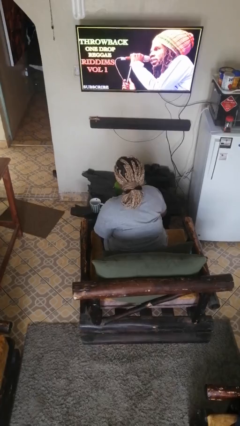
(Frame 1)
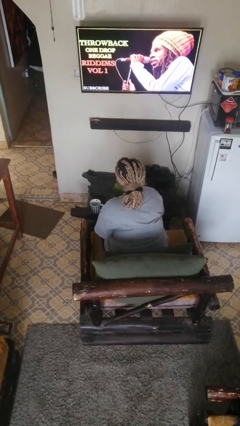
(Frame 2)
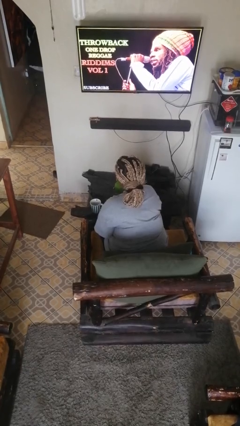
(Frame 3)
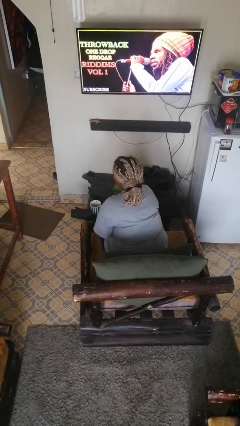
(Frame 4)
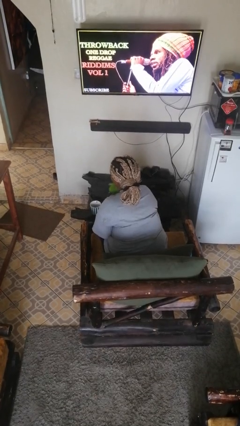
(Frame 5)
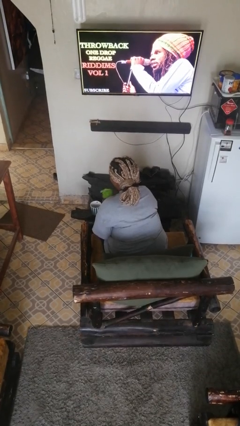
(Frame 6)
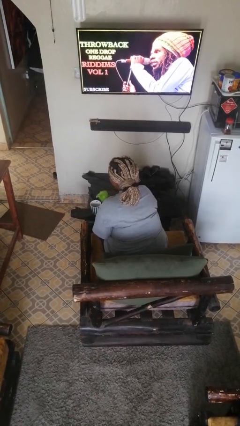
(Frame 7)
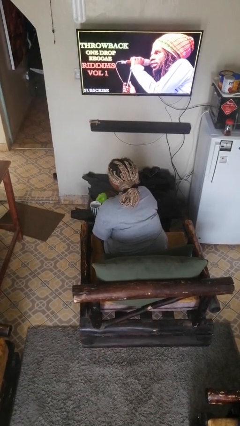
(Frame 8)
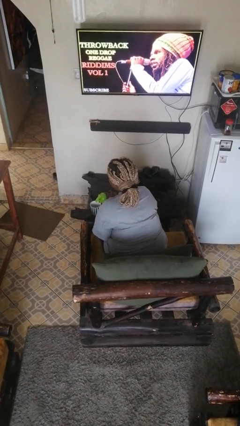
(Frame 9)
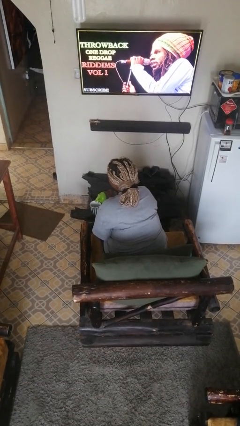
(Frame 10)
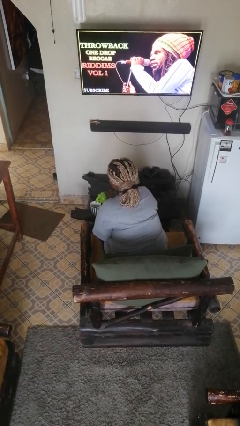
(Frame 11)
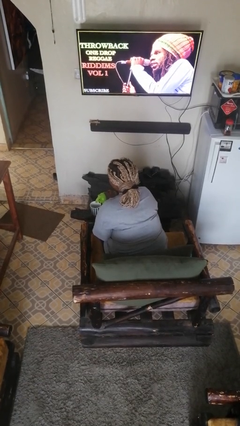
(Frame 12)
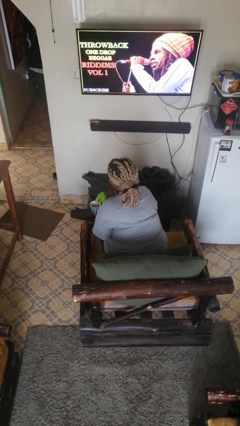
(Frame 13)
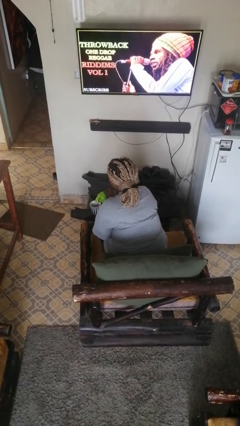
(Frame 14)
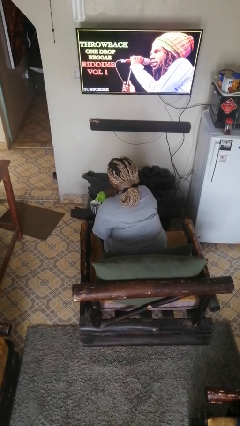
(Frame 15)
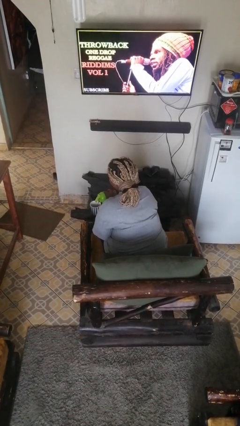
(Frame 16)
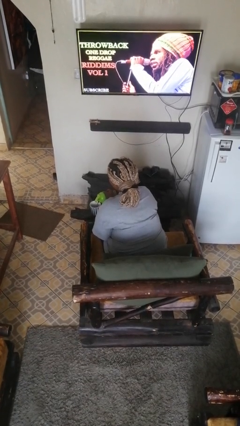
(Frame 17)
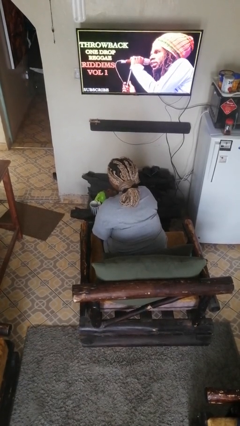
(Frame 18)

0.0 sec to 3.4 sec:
person pours coffee into mug

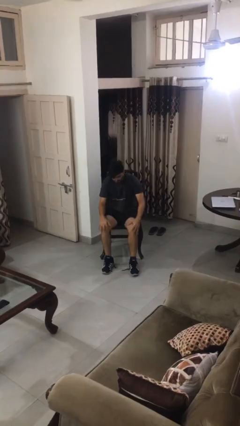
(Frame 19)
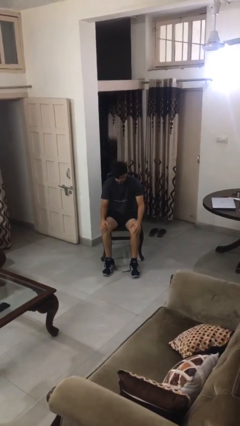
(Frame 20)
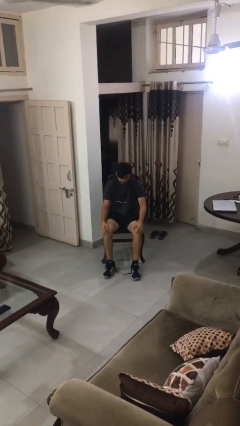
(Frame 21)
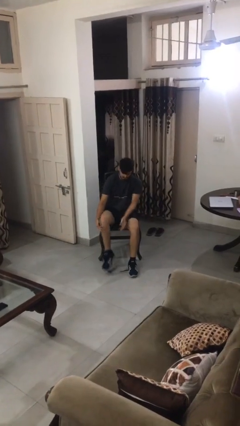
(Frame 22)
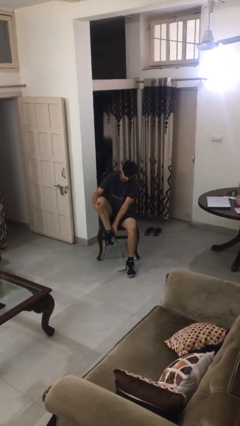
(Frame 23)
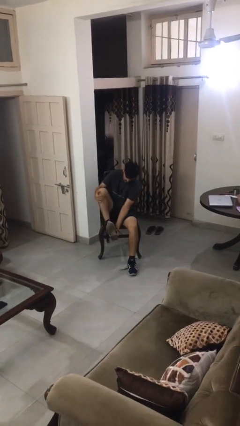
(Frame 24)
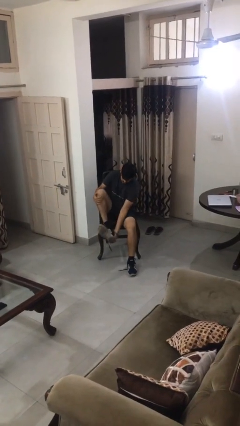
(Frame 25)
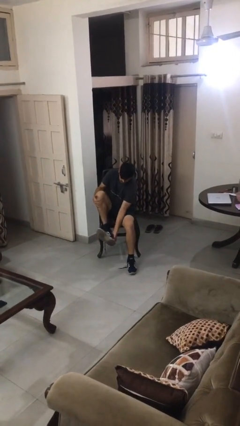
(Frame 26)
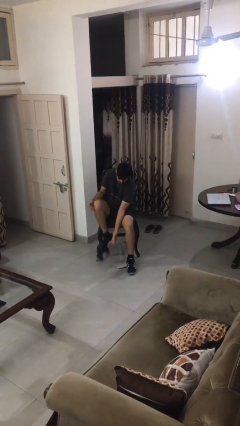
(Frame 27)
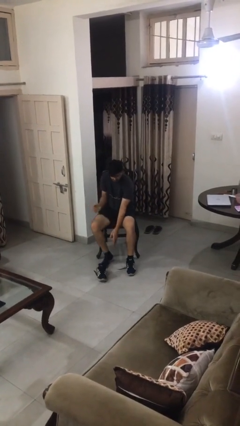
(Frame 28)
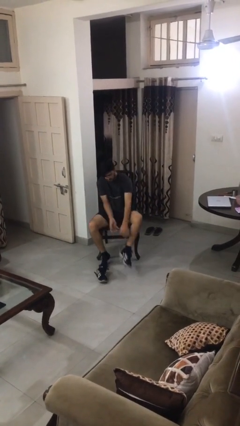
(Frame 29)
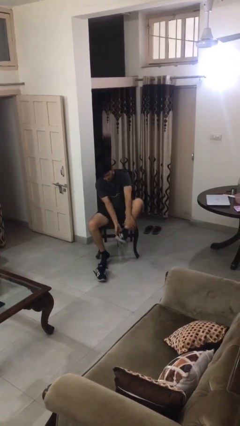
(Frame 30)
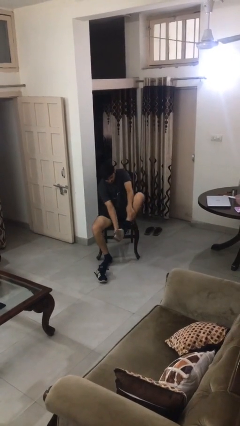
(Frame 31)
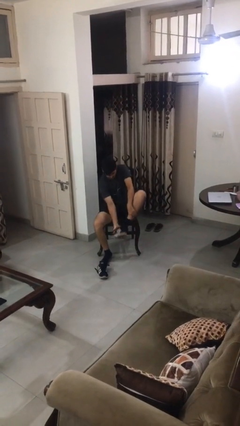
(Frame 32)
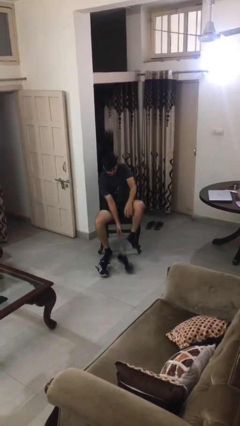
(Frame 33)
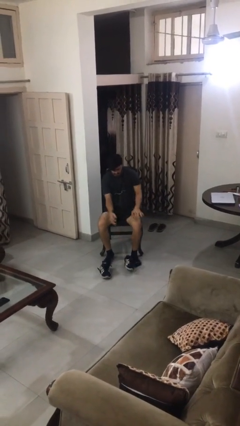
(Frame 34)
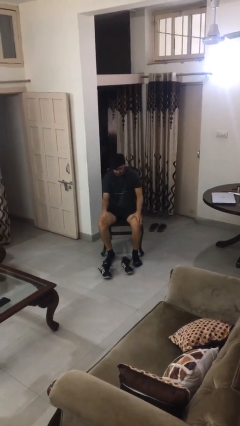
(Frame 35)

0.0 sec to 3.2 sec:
person takes off shoes

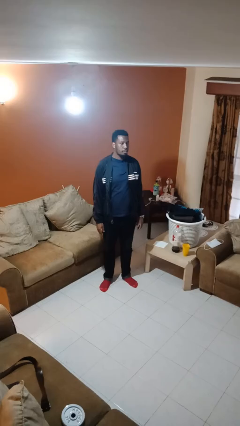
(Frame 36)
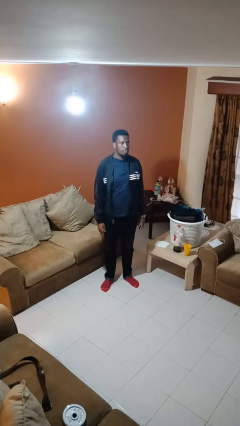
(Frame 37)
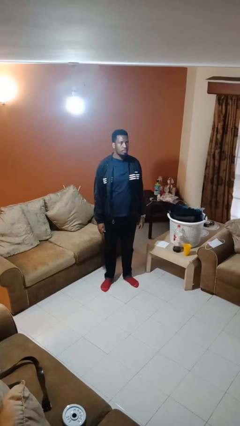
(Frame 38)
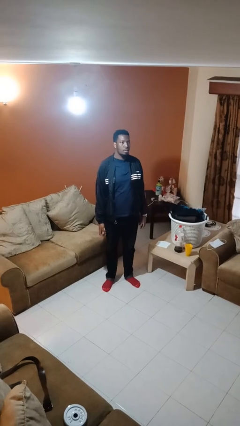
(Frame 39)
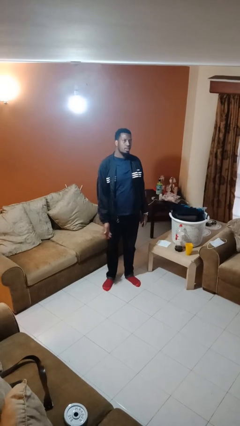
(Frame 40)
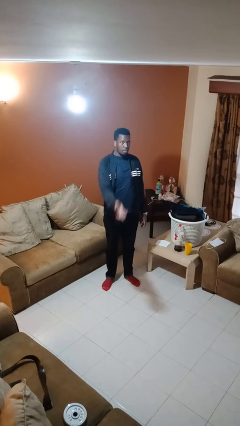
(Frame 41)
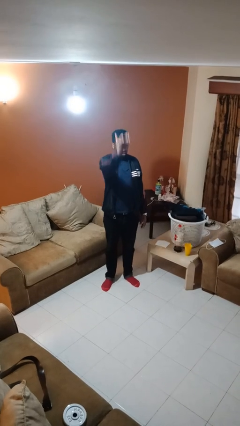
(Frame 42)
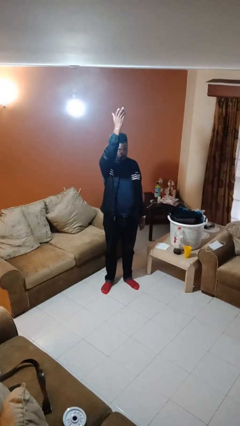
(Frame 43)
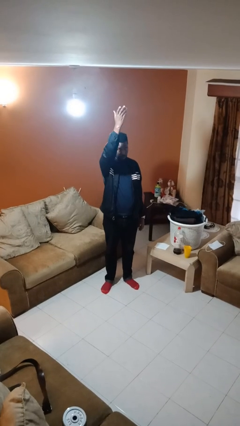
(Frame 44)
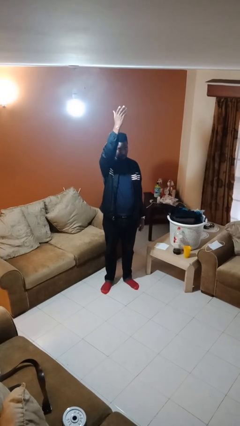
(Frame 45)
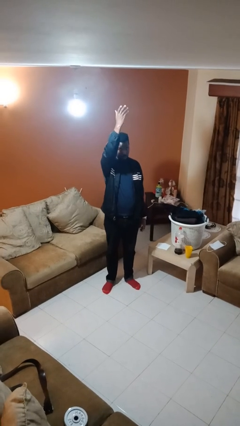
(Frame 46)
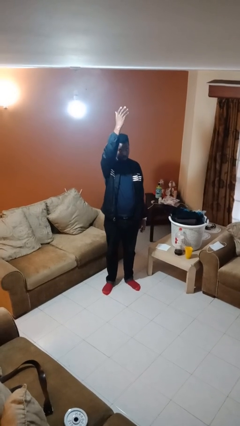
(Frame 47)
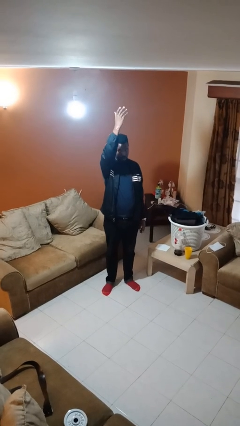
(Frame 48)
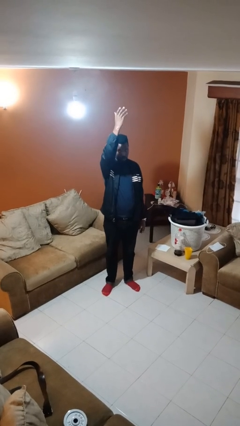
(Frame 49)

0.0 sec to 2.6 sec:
person gestures swipe up

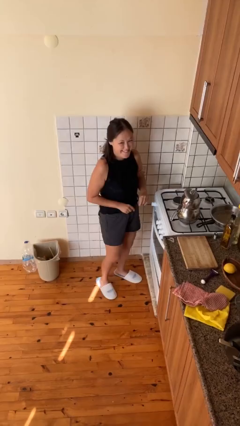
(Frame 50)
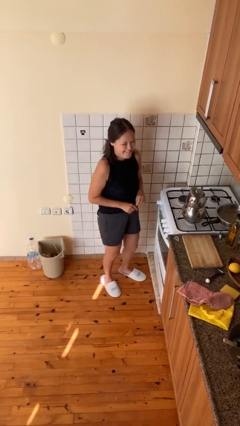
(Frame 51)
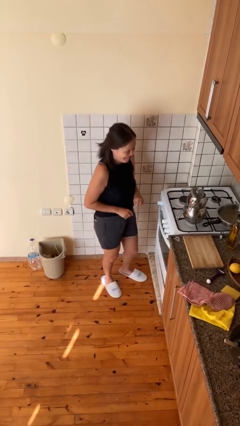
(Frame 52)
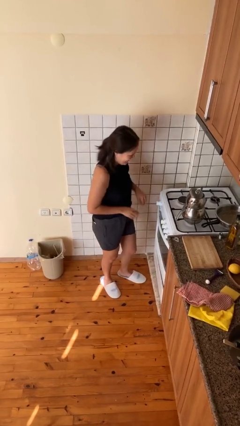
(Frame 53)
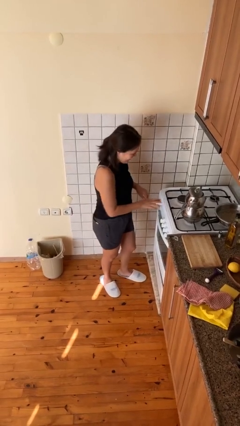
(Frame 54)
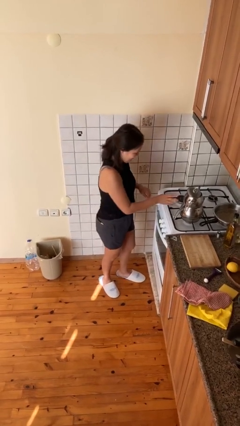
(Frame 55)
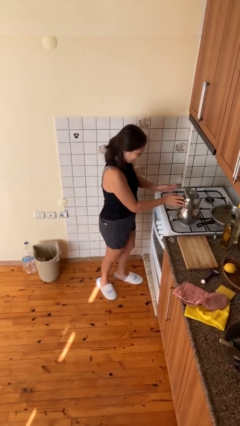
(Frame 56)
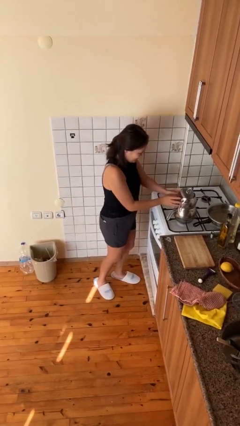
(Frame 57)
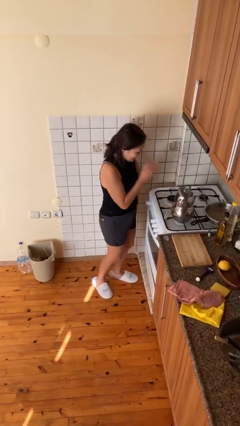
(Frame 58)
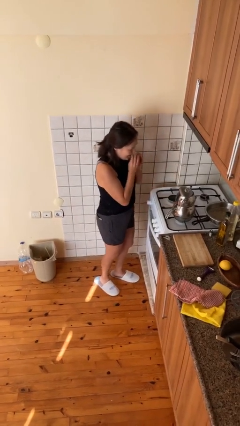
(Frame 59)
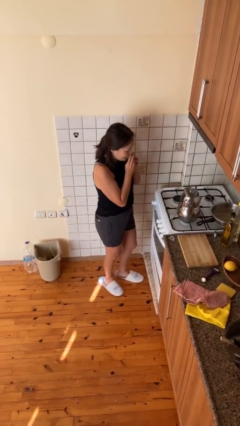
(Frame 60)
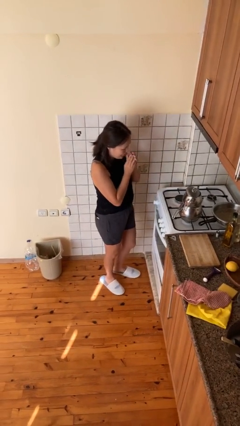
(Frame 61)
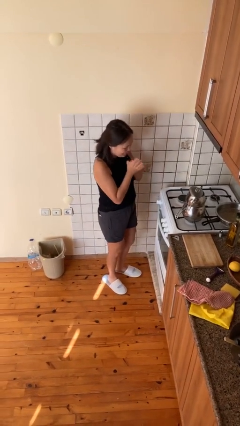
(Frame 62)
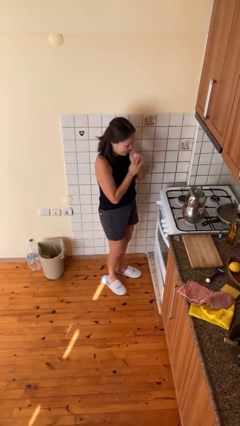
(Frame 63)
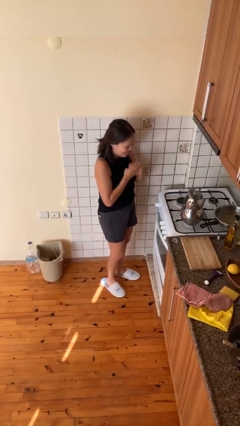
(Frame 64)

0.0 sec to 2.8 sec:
person burns hand

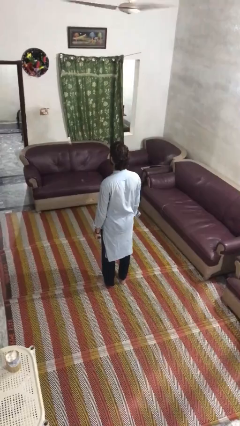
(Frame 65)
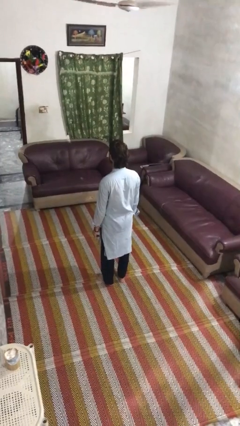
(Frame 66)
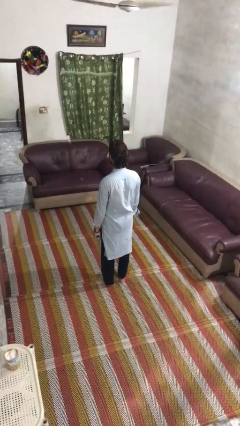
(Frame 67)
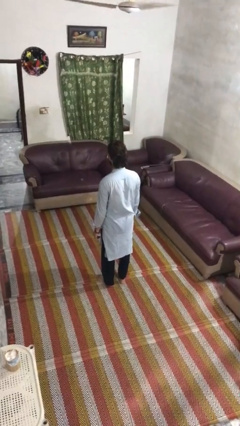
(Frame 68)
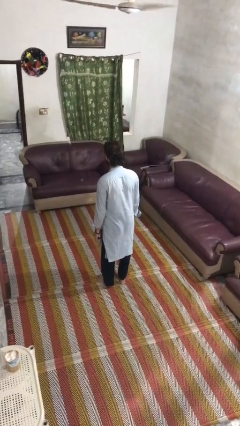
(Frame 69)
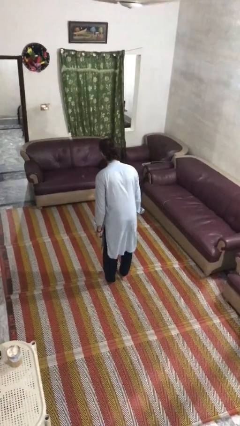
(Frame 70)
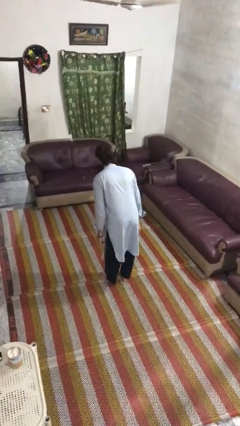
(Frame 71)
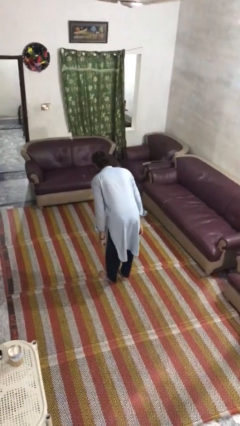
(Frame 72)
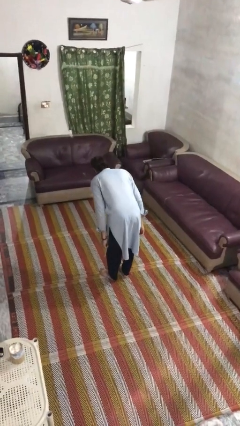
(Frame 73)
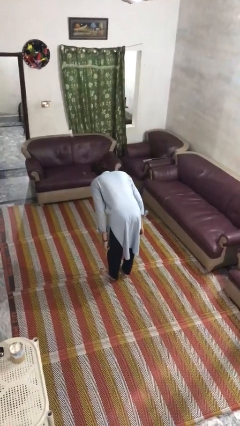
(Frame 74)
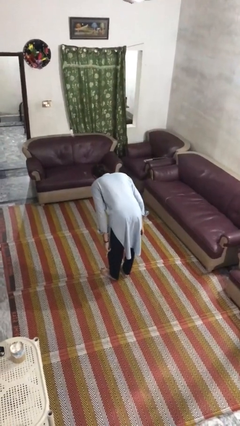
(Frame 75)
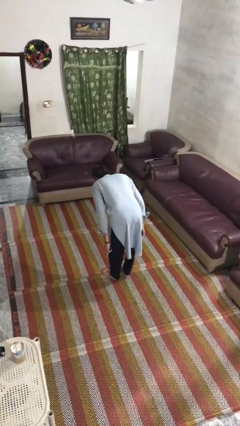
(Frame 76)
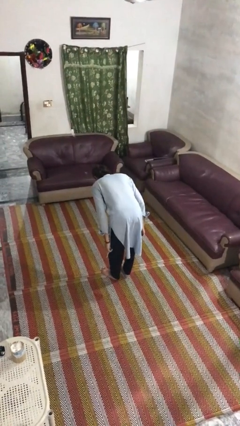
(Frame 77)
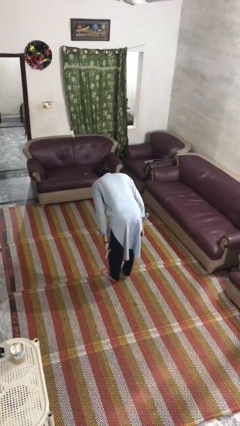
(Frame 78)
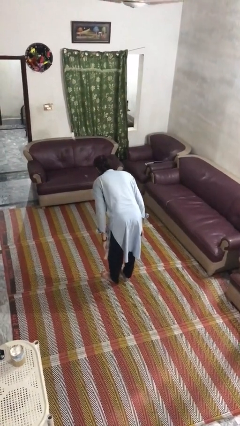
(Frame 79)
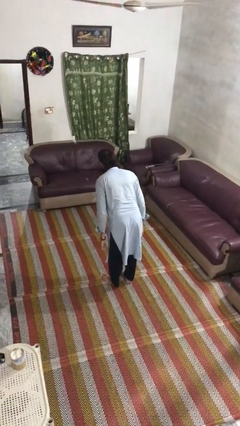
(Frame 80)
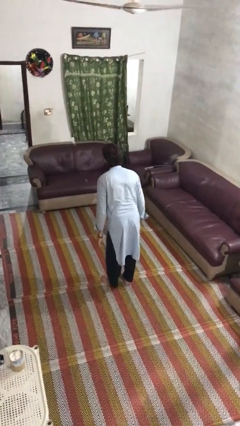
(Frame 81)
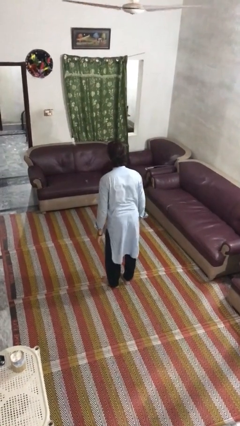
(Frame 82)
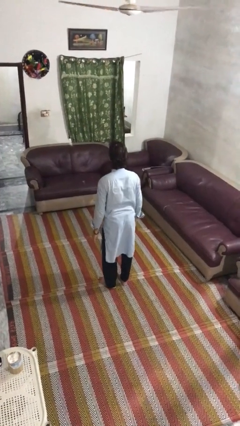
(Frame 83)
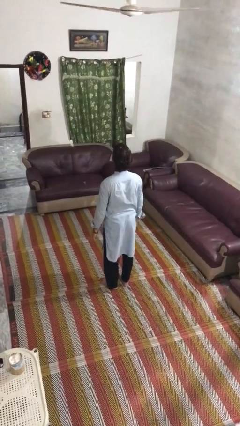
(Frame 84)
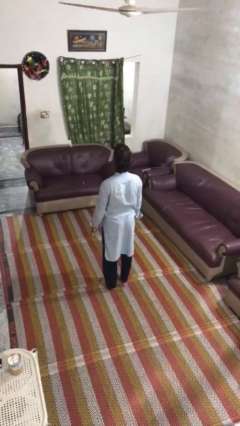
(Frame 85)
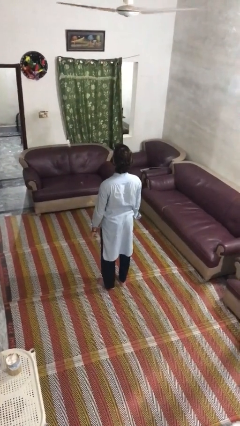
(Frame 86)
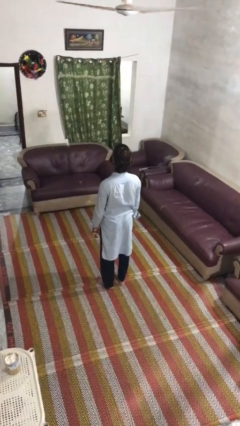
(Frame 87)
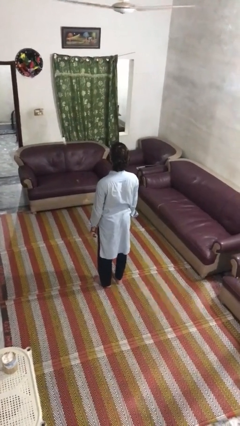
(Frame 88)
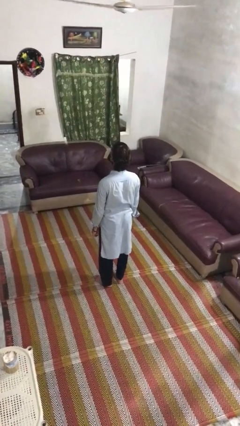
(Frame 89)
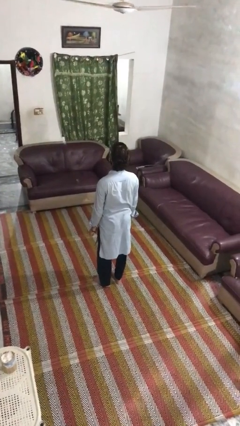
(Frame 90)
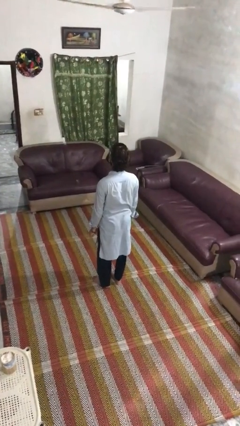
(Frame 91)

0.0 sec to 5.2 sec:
person bows

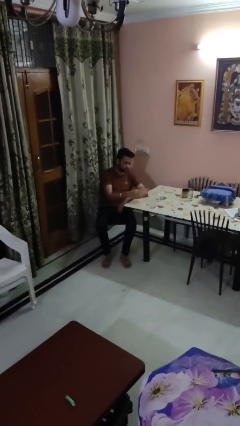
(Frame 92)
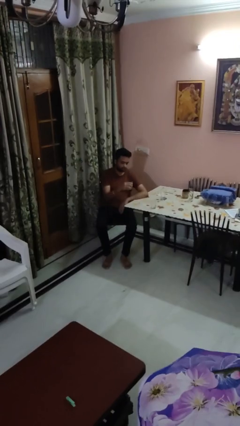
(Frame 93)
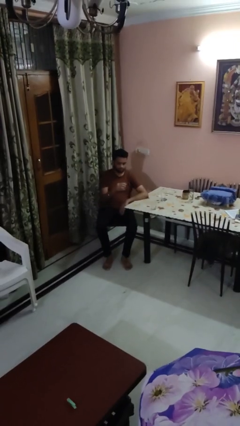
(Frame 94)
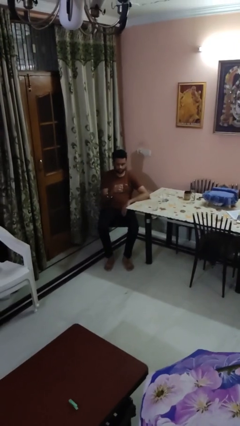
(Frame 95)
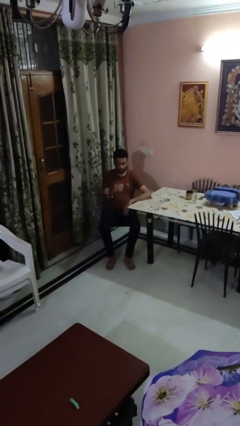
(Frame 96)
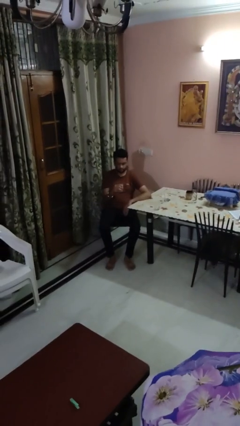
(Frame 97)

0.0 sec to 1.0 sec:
person picks up object from table
